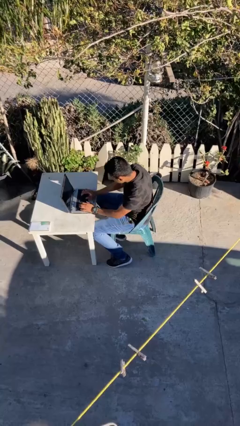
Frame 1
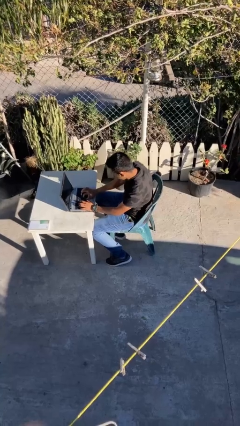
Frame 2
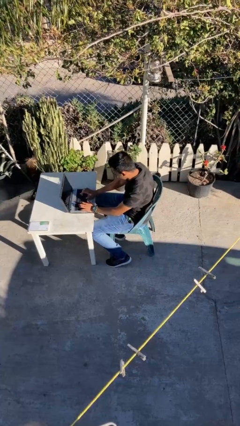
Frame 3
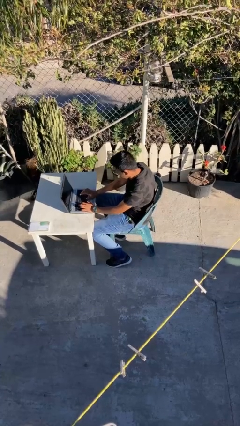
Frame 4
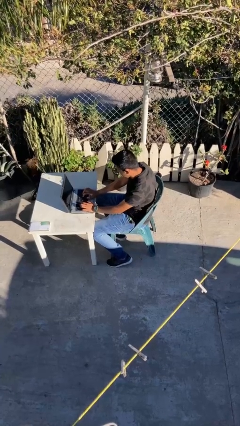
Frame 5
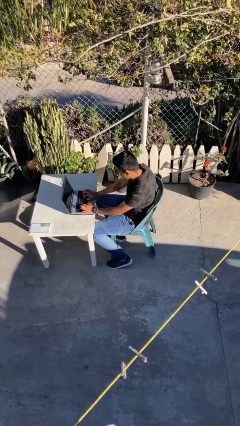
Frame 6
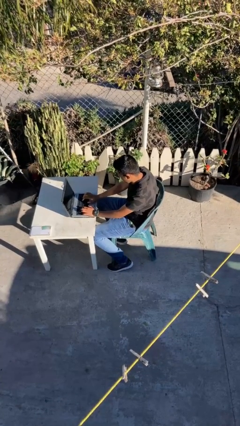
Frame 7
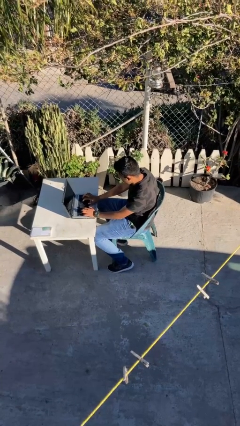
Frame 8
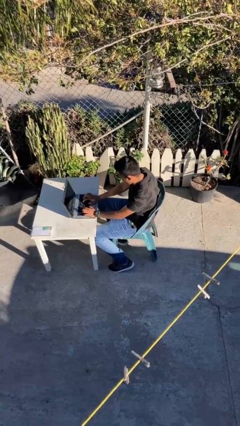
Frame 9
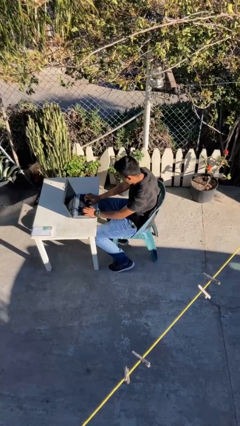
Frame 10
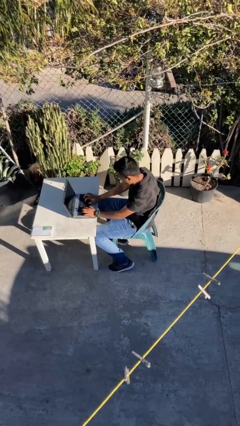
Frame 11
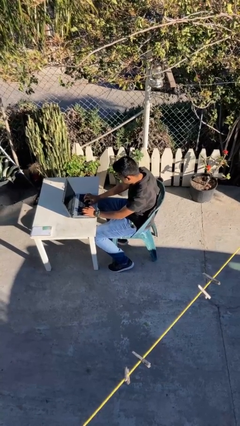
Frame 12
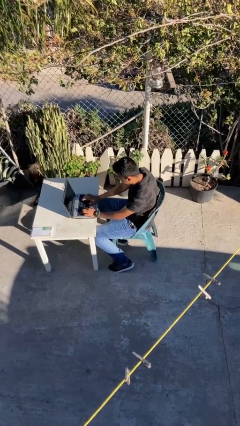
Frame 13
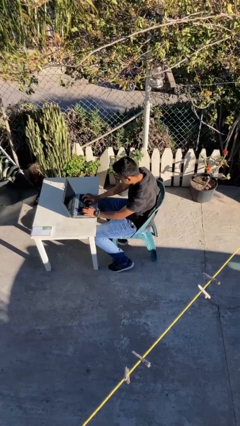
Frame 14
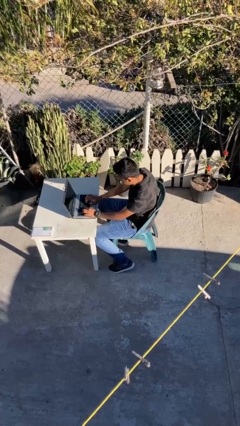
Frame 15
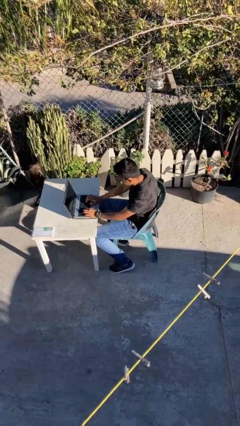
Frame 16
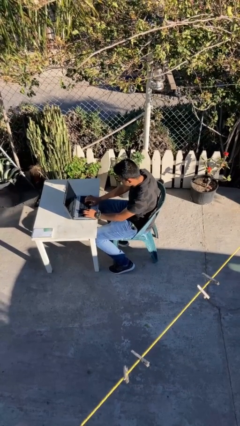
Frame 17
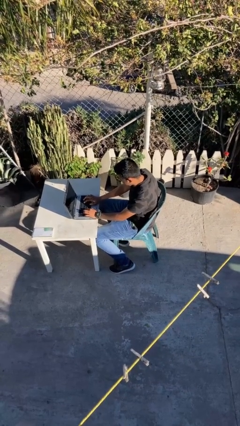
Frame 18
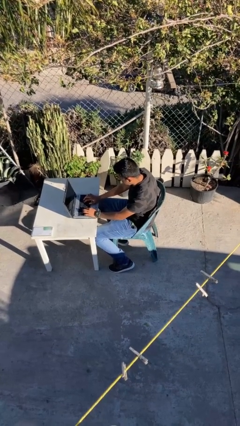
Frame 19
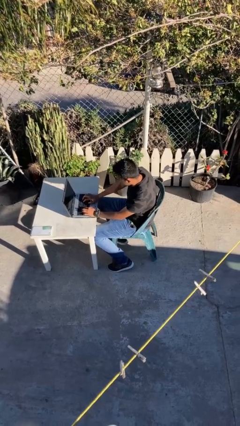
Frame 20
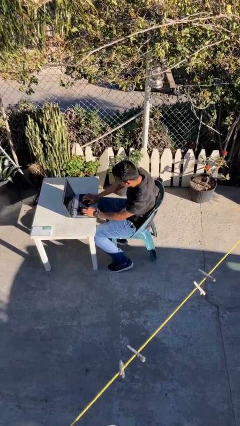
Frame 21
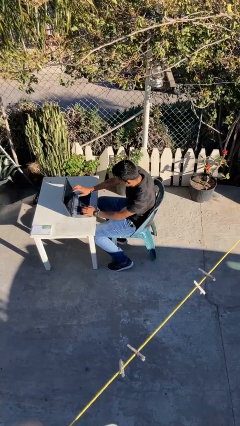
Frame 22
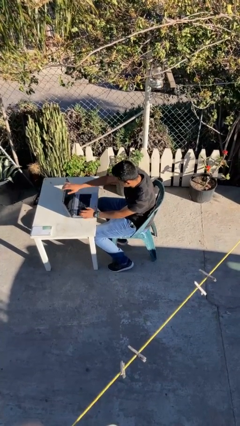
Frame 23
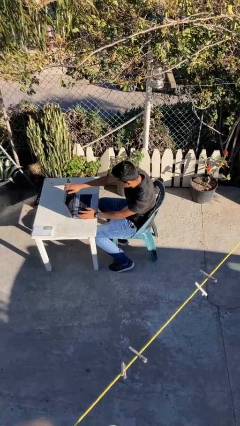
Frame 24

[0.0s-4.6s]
person interacts with laptop

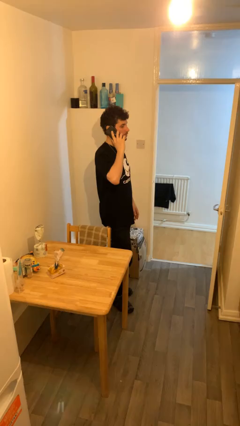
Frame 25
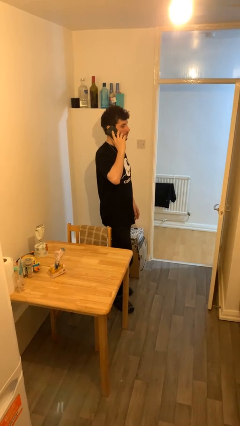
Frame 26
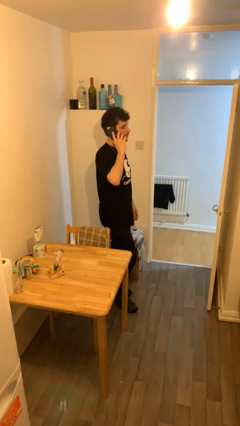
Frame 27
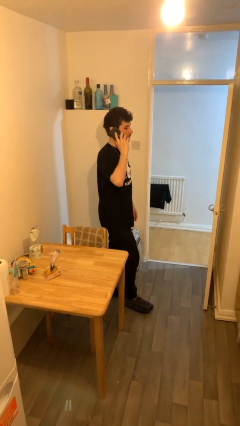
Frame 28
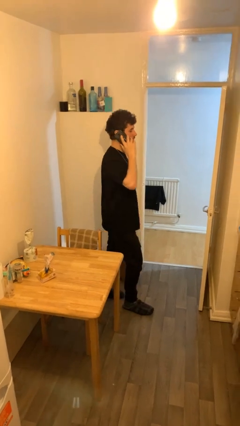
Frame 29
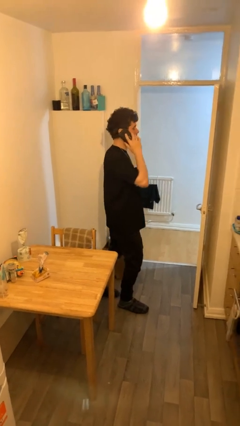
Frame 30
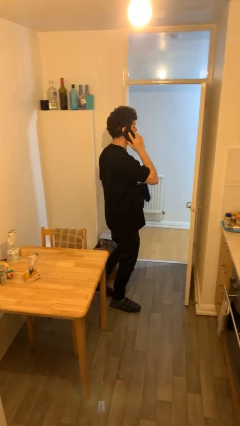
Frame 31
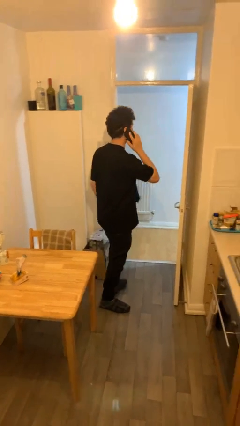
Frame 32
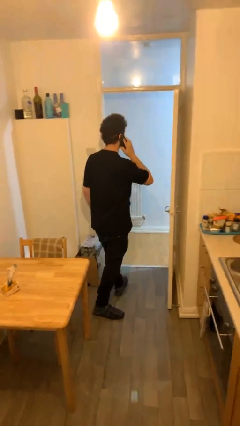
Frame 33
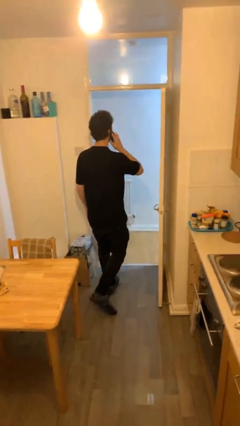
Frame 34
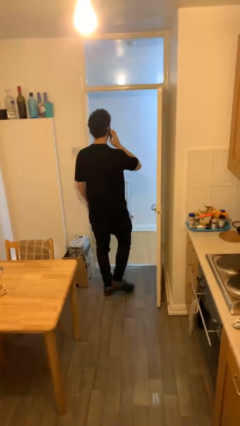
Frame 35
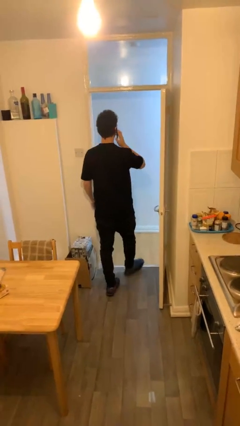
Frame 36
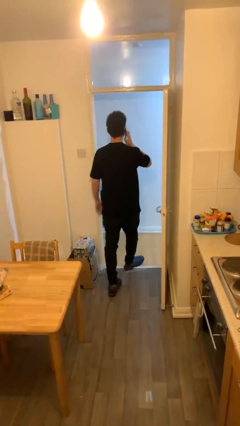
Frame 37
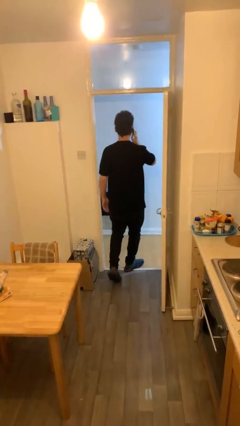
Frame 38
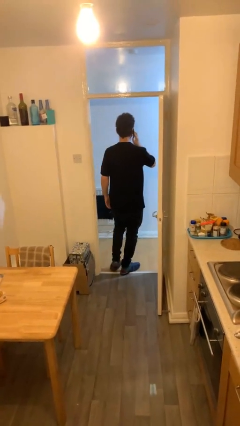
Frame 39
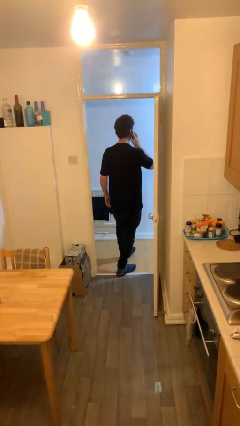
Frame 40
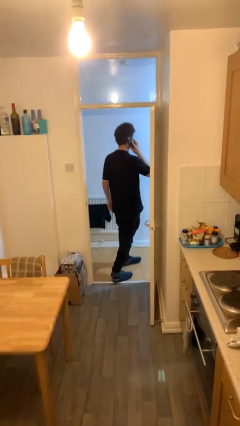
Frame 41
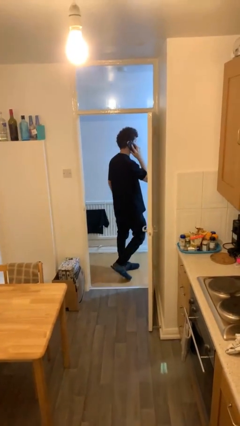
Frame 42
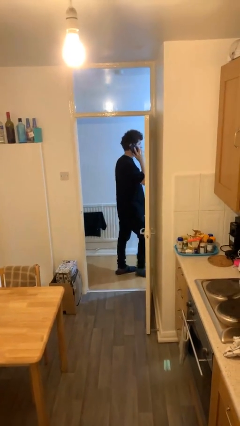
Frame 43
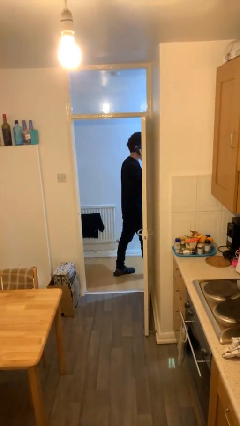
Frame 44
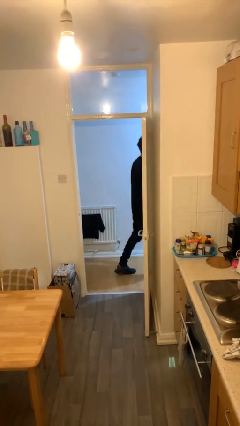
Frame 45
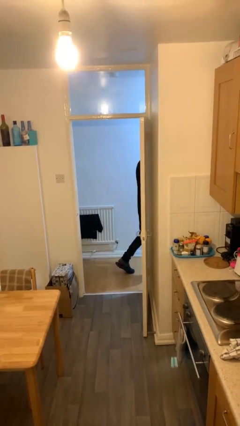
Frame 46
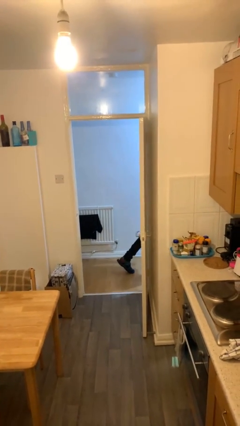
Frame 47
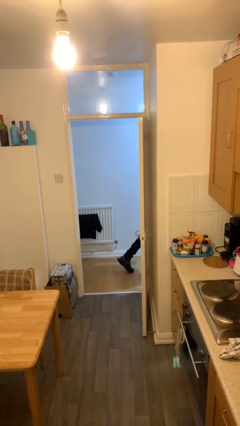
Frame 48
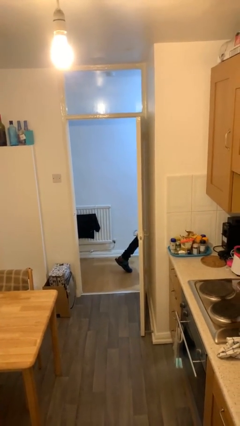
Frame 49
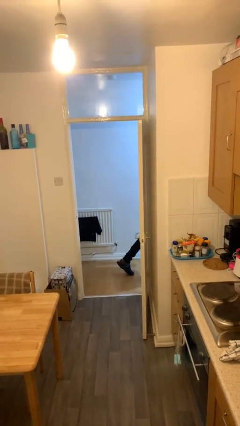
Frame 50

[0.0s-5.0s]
person exits scene through structure

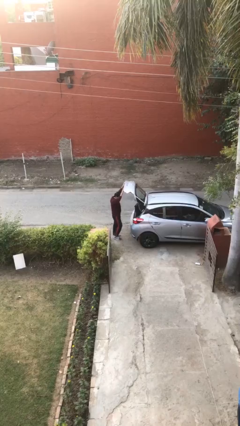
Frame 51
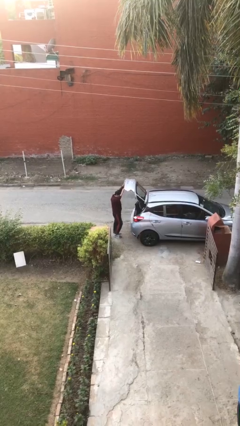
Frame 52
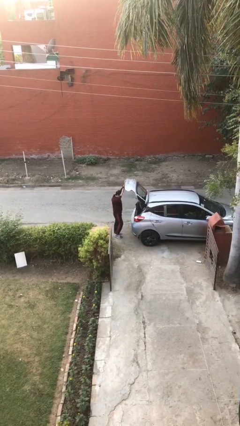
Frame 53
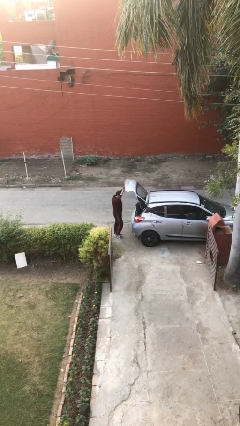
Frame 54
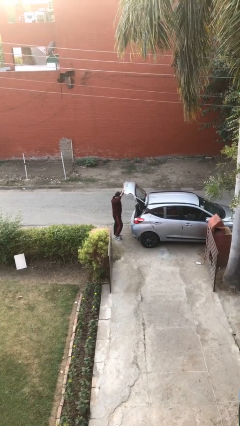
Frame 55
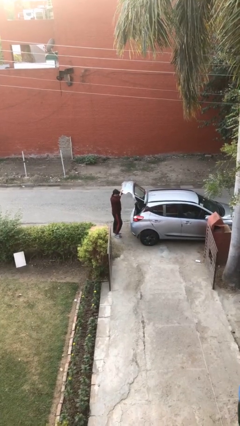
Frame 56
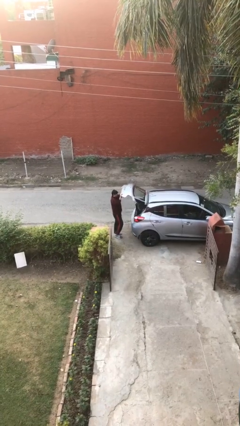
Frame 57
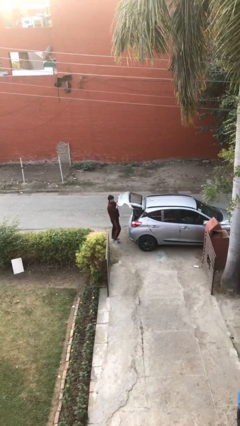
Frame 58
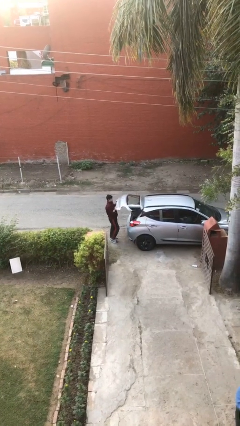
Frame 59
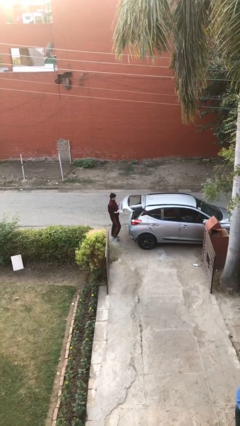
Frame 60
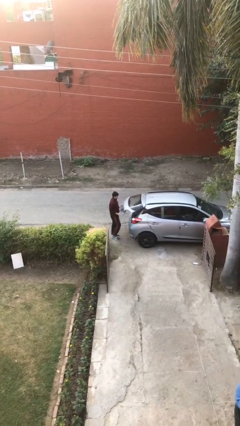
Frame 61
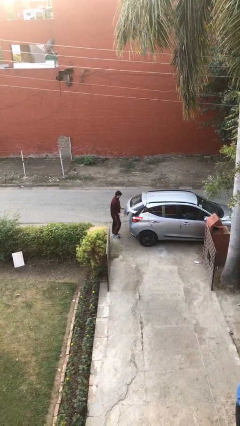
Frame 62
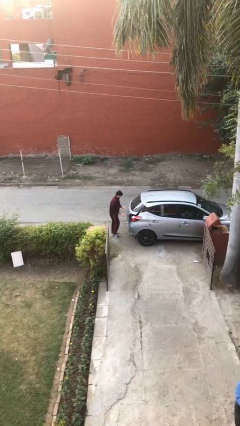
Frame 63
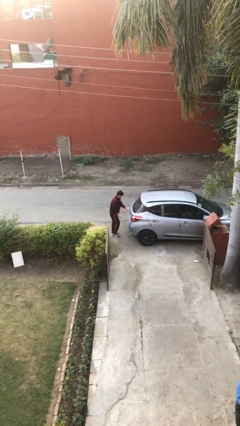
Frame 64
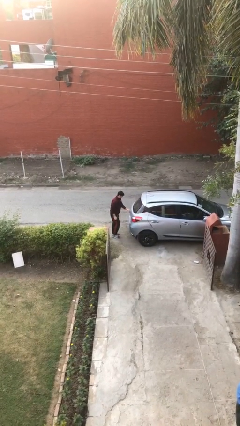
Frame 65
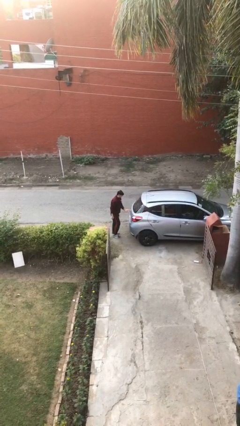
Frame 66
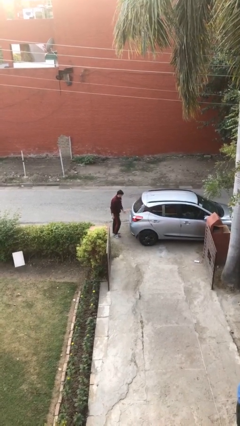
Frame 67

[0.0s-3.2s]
person closes car trunk

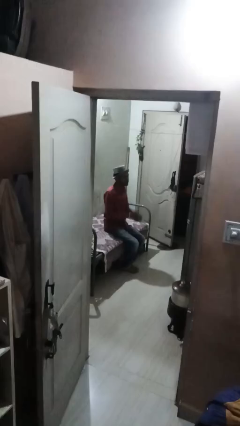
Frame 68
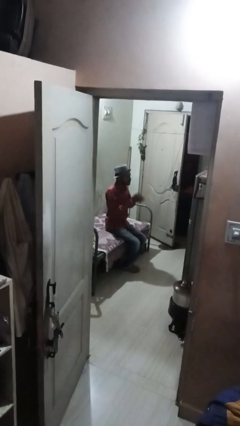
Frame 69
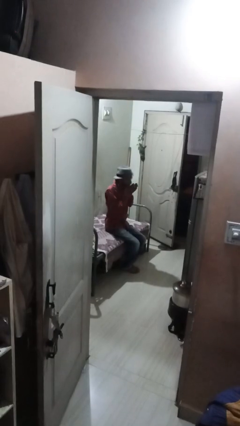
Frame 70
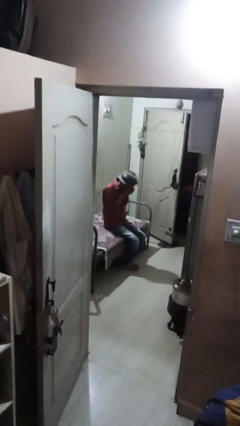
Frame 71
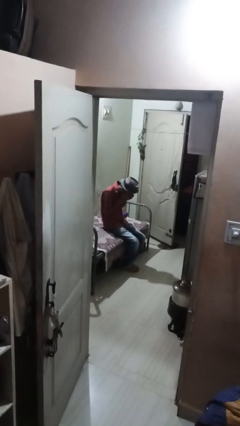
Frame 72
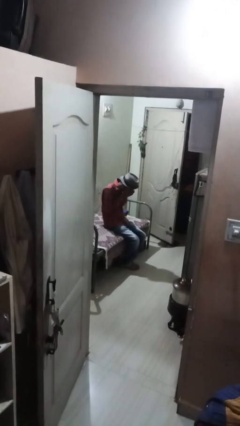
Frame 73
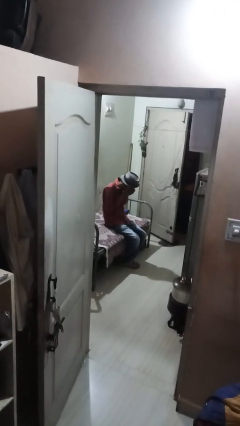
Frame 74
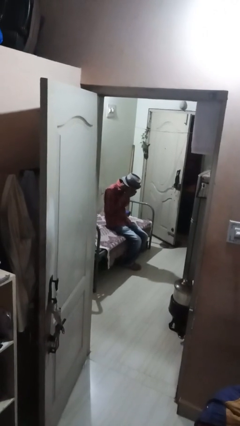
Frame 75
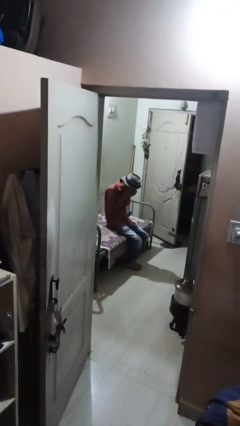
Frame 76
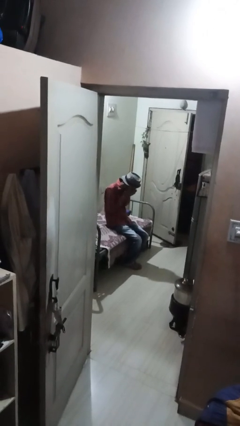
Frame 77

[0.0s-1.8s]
person sneezes into hand

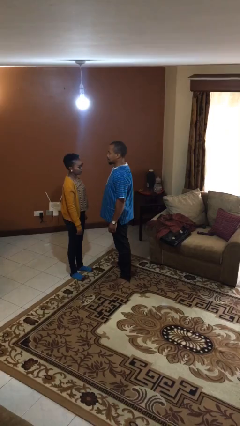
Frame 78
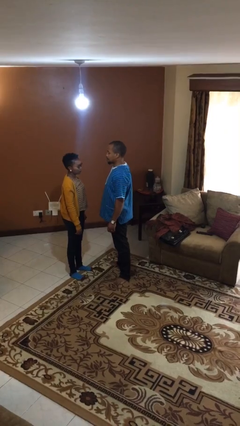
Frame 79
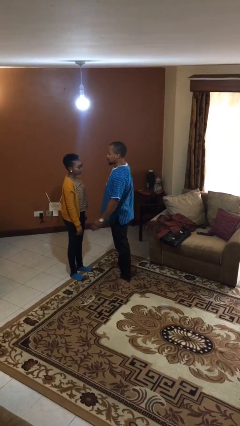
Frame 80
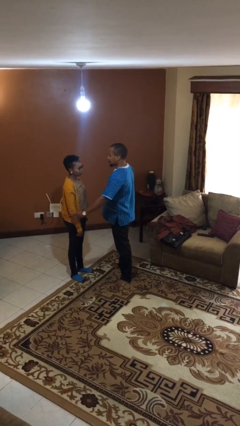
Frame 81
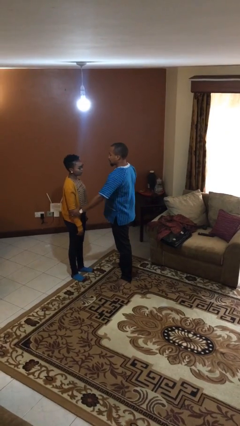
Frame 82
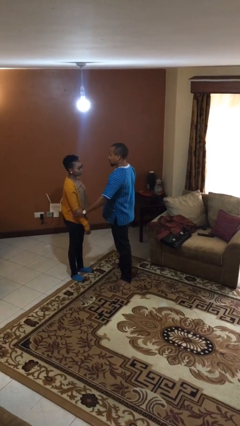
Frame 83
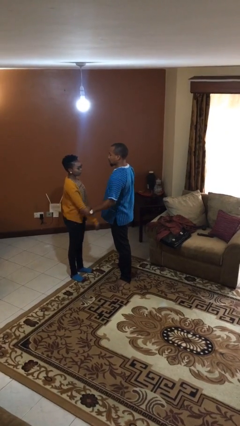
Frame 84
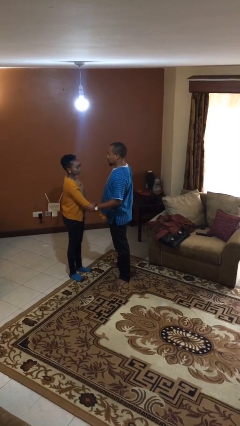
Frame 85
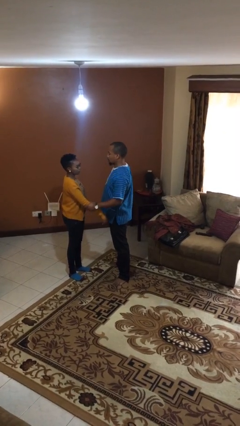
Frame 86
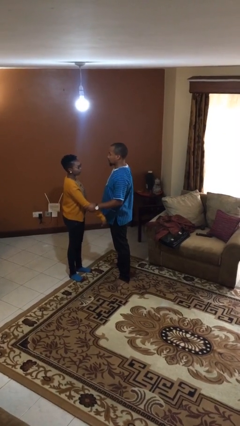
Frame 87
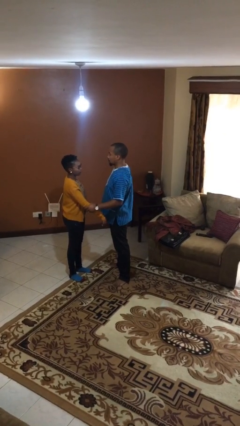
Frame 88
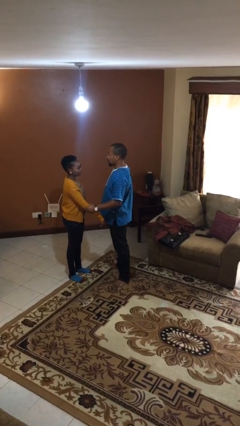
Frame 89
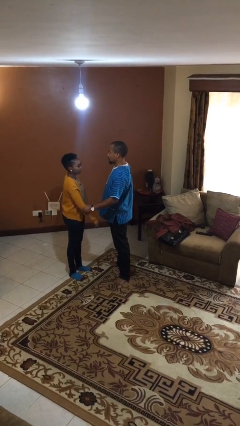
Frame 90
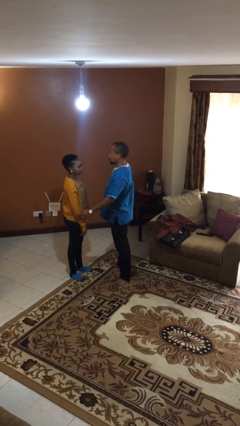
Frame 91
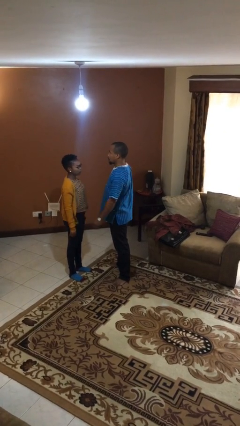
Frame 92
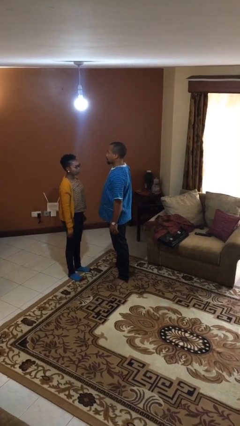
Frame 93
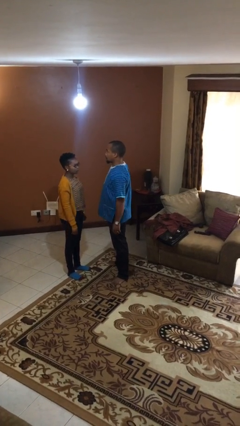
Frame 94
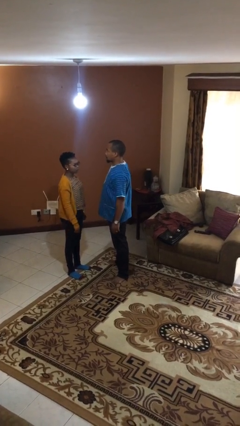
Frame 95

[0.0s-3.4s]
person grabs person by forearm
